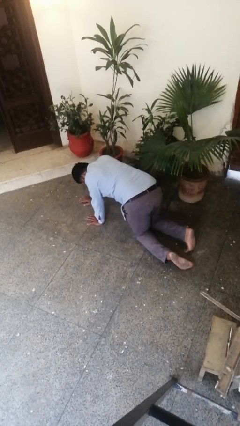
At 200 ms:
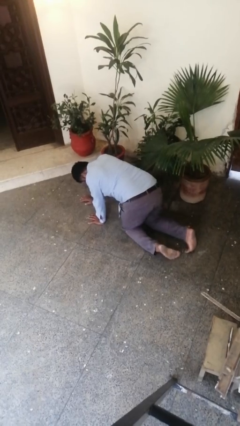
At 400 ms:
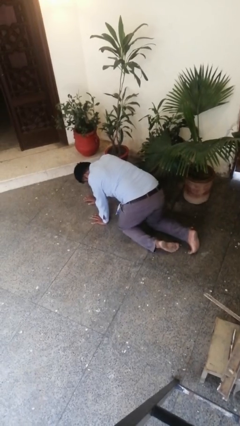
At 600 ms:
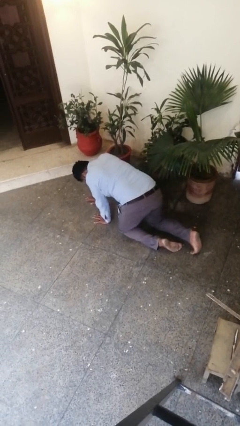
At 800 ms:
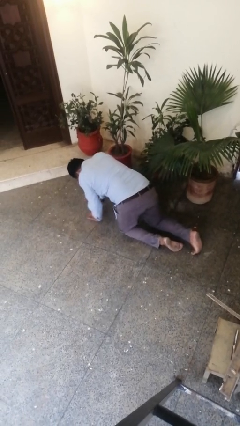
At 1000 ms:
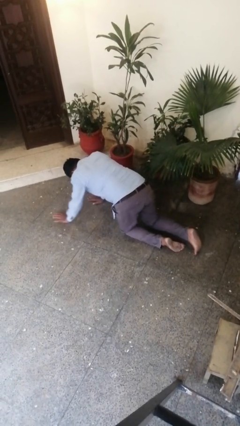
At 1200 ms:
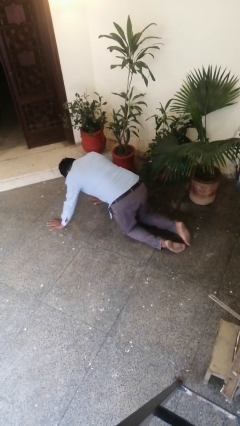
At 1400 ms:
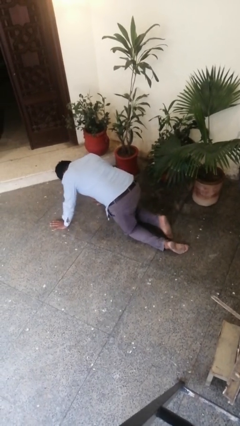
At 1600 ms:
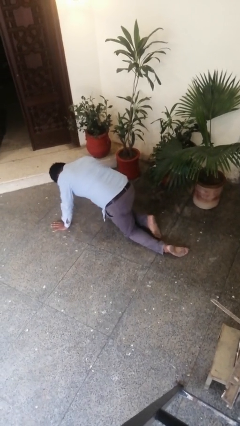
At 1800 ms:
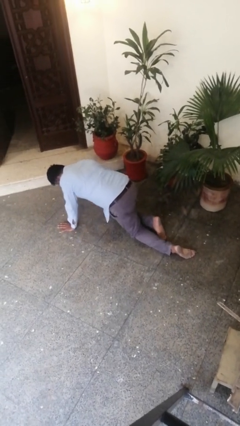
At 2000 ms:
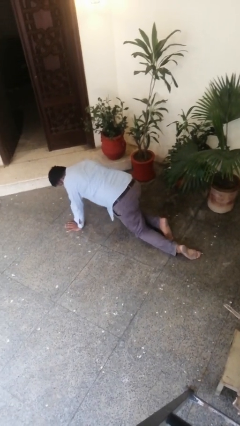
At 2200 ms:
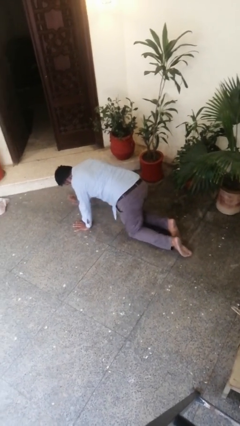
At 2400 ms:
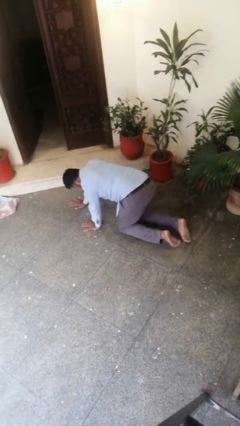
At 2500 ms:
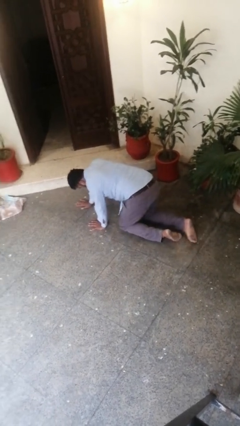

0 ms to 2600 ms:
person crawls

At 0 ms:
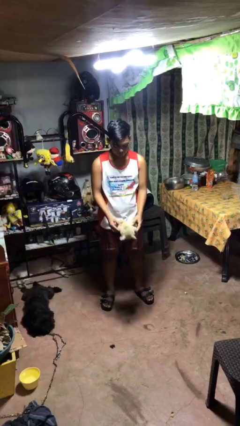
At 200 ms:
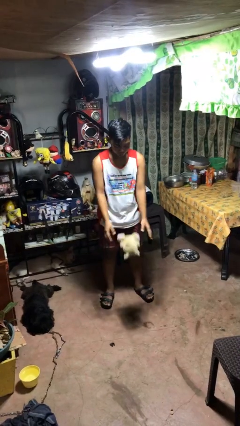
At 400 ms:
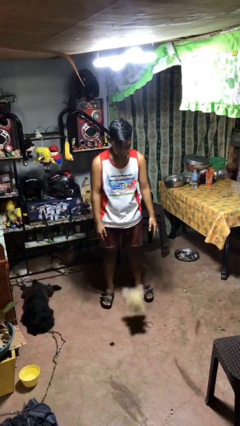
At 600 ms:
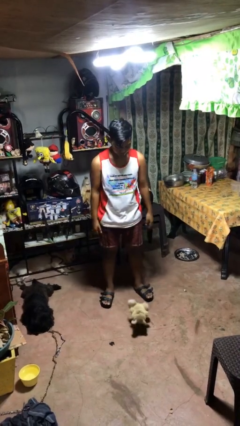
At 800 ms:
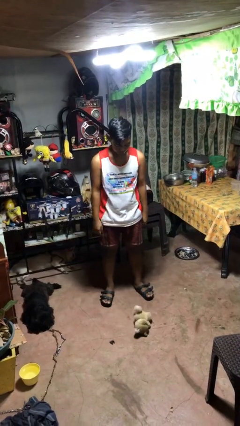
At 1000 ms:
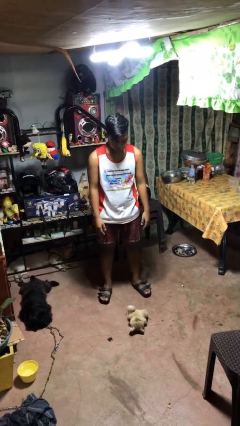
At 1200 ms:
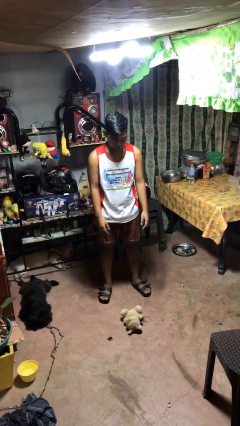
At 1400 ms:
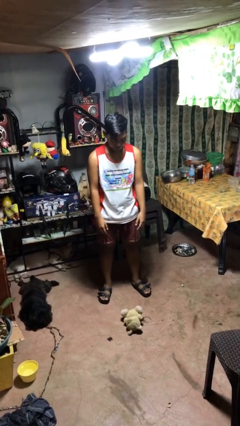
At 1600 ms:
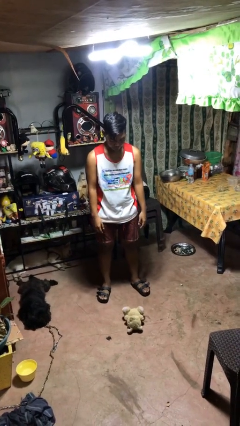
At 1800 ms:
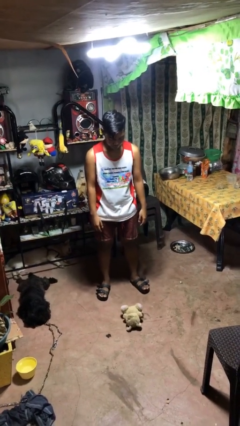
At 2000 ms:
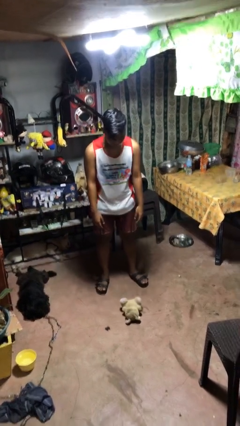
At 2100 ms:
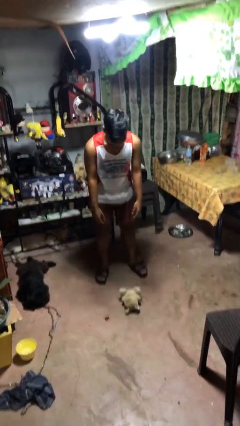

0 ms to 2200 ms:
person drops object

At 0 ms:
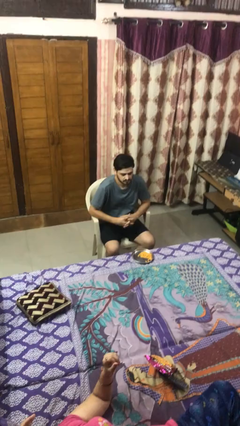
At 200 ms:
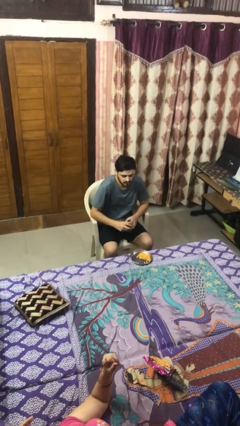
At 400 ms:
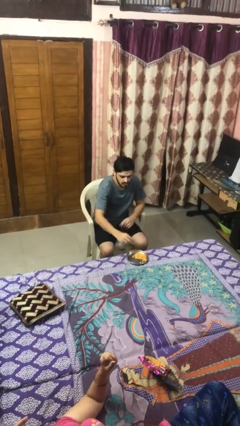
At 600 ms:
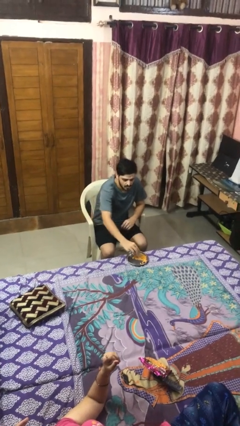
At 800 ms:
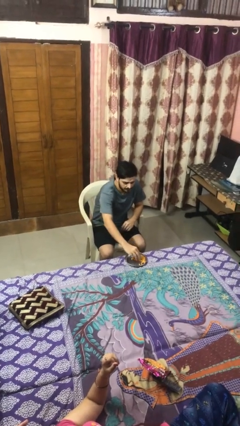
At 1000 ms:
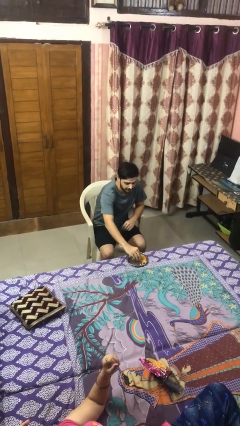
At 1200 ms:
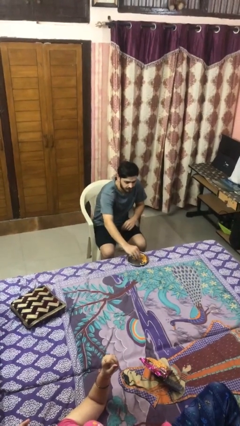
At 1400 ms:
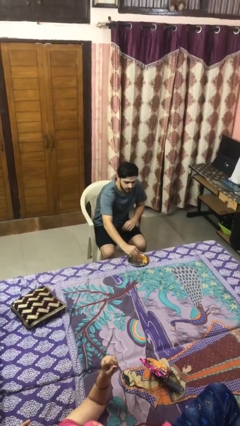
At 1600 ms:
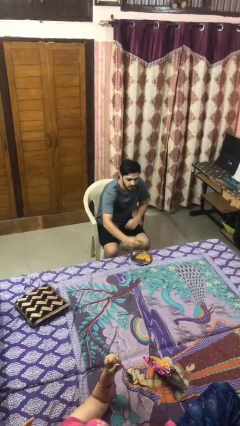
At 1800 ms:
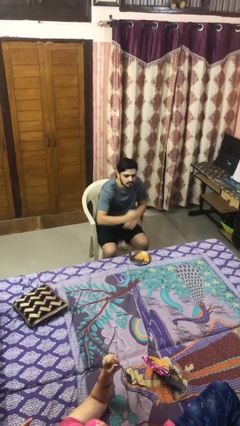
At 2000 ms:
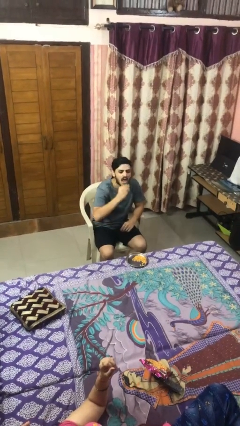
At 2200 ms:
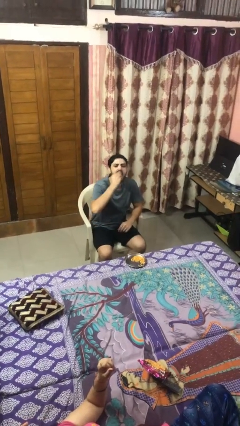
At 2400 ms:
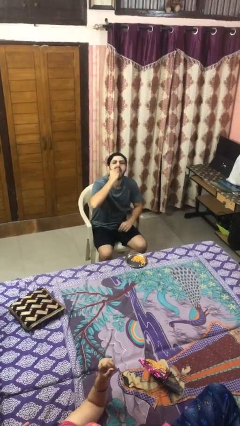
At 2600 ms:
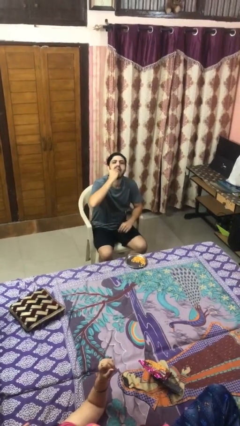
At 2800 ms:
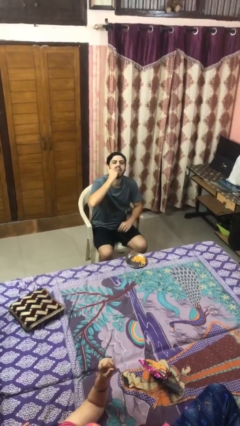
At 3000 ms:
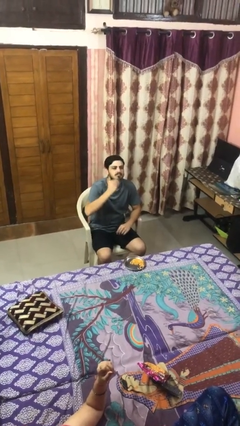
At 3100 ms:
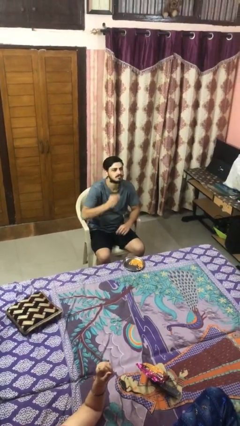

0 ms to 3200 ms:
person eats with hands

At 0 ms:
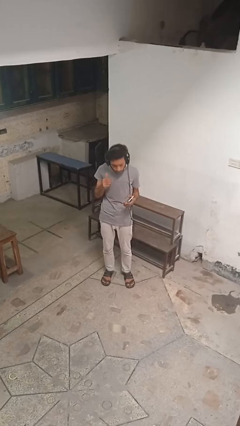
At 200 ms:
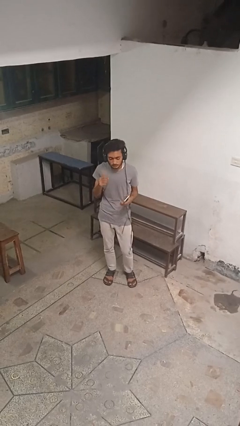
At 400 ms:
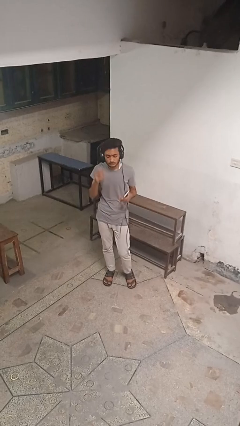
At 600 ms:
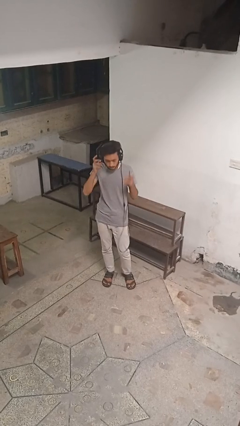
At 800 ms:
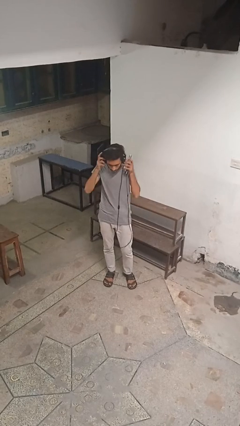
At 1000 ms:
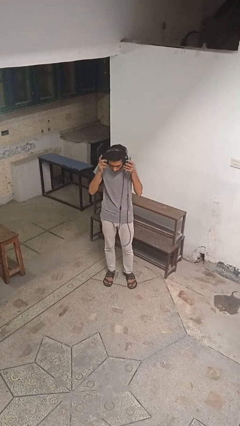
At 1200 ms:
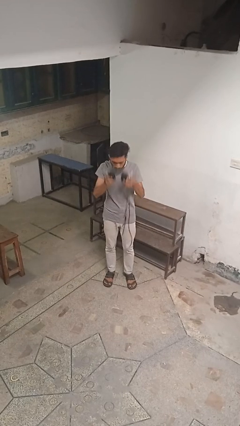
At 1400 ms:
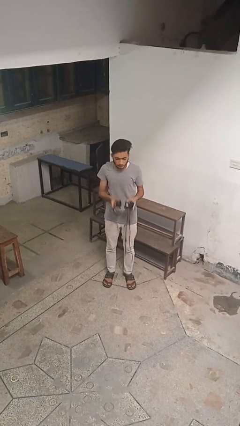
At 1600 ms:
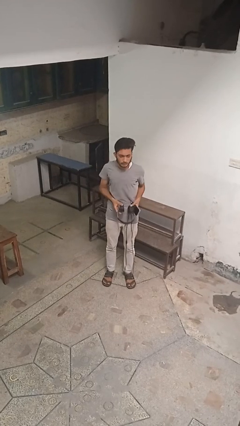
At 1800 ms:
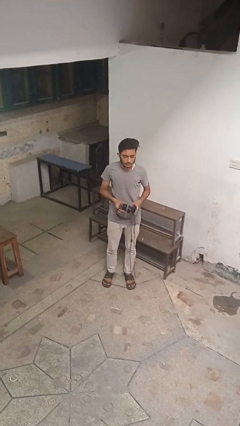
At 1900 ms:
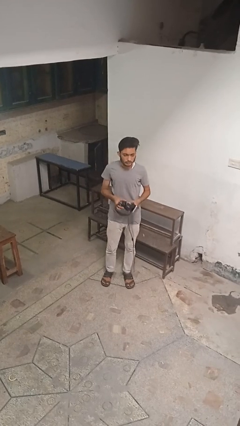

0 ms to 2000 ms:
person takes off headphones

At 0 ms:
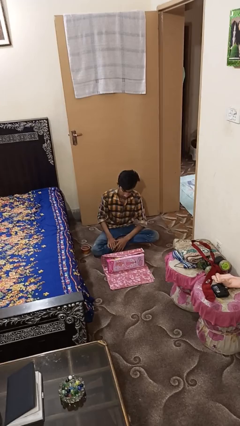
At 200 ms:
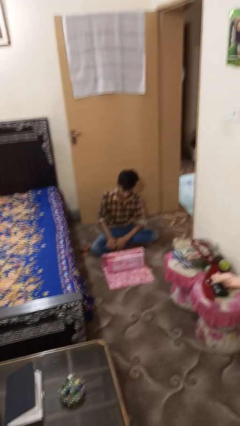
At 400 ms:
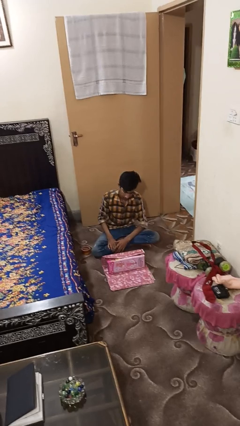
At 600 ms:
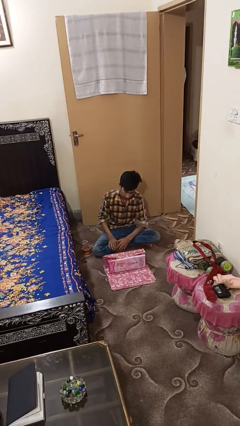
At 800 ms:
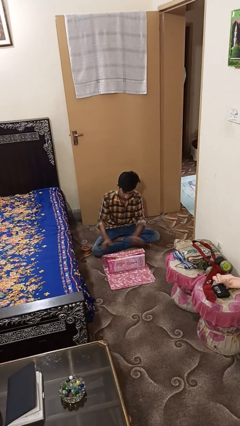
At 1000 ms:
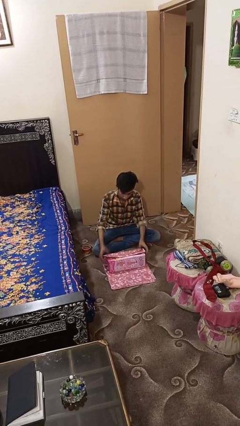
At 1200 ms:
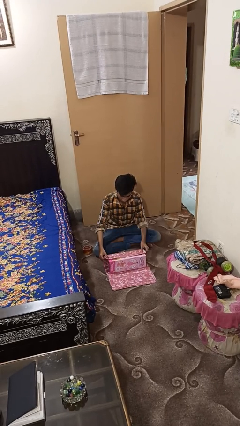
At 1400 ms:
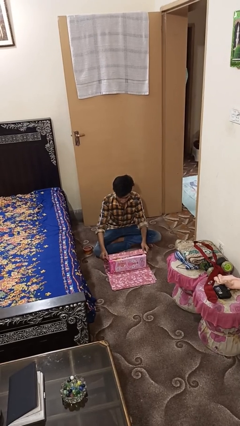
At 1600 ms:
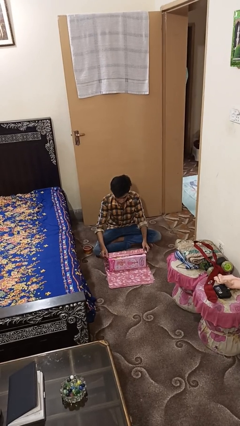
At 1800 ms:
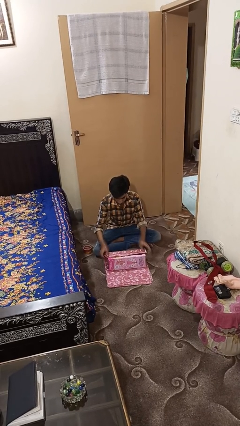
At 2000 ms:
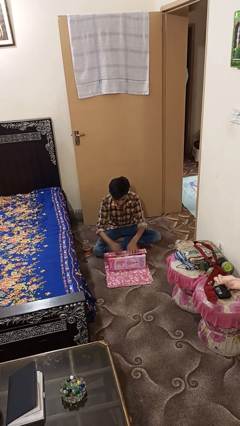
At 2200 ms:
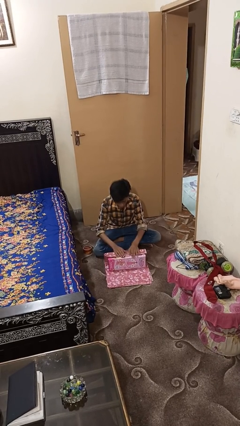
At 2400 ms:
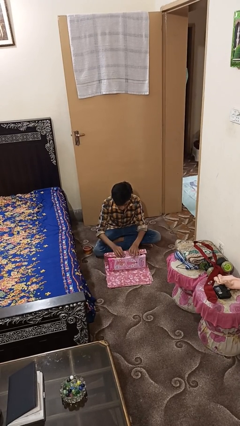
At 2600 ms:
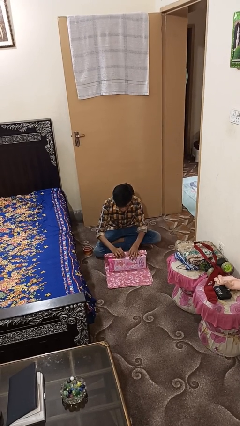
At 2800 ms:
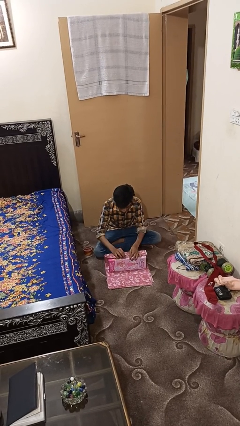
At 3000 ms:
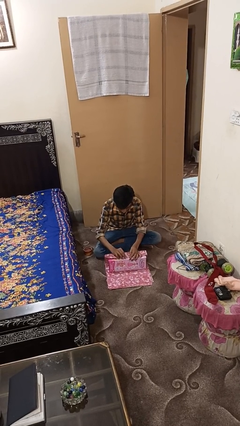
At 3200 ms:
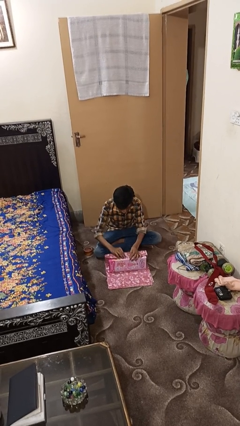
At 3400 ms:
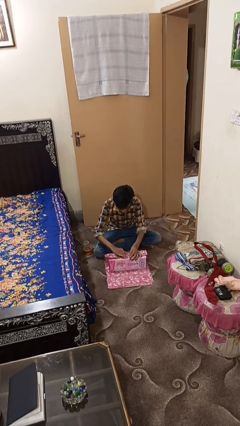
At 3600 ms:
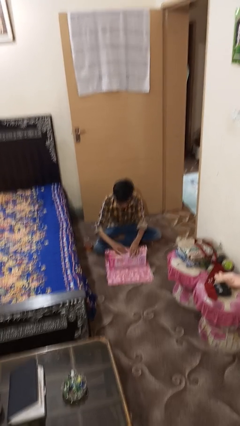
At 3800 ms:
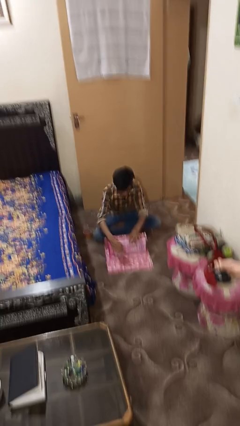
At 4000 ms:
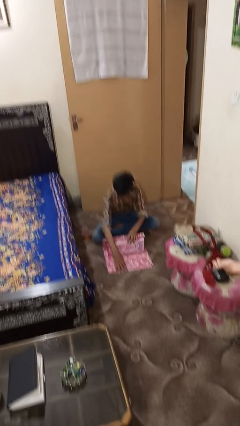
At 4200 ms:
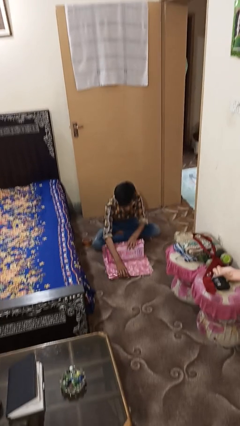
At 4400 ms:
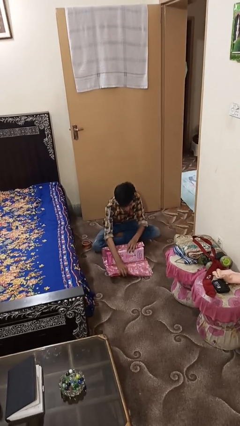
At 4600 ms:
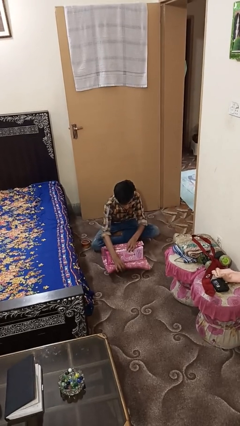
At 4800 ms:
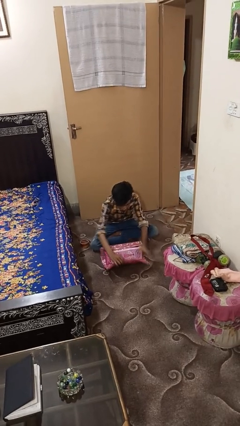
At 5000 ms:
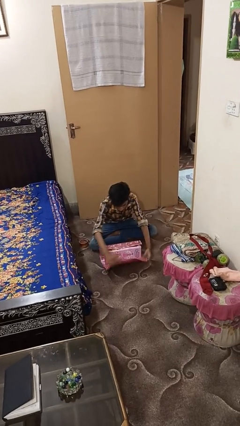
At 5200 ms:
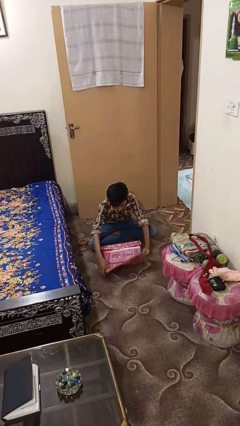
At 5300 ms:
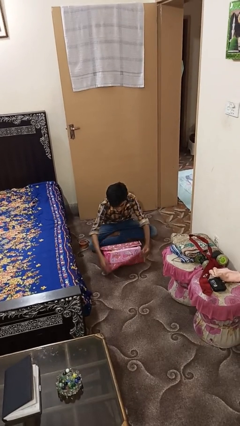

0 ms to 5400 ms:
person wraps box

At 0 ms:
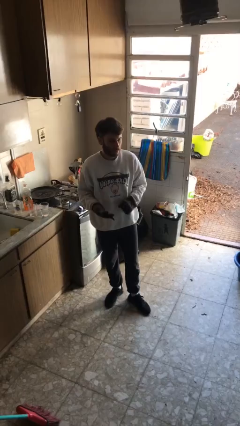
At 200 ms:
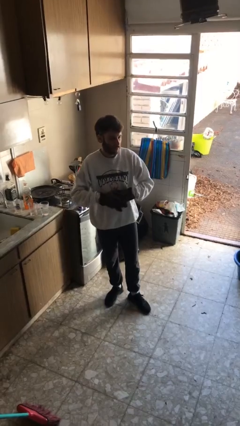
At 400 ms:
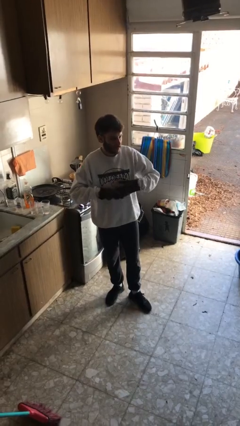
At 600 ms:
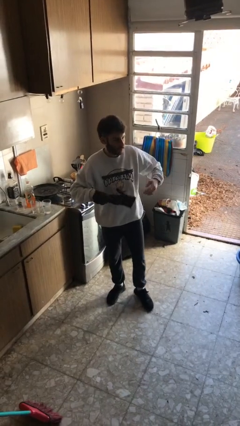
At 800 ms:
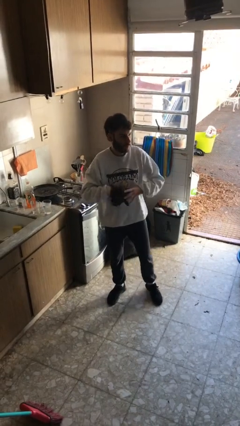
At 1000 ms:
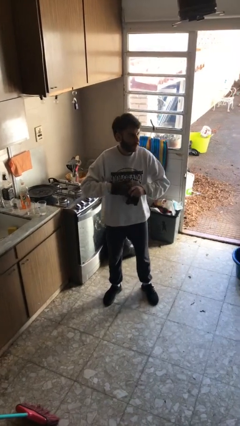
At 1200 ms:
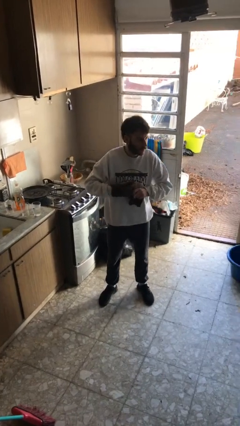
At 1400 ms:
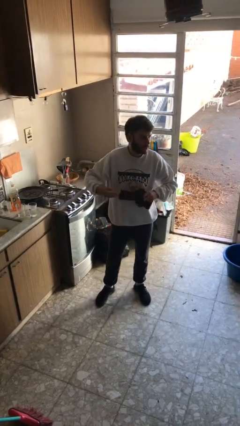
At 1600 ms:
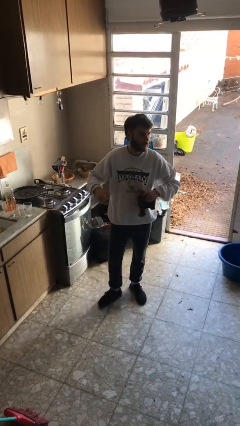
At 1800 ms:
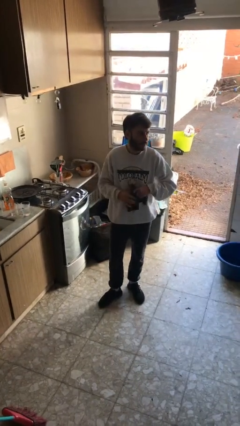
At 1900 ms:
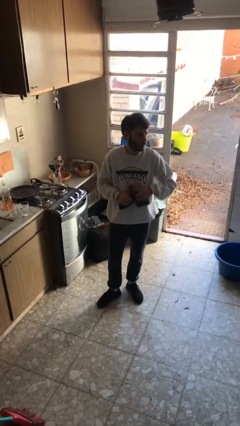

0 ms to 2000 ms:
person takes off gloves
